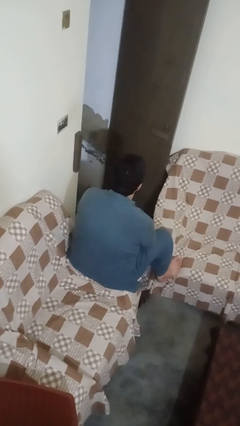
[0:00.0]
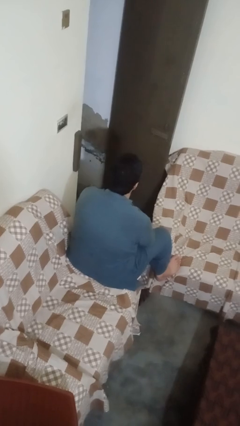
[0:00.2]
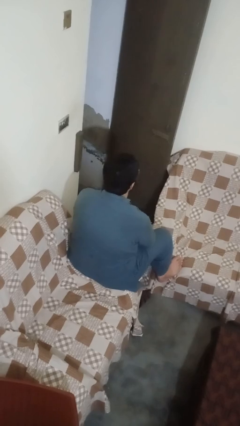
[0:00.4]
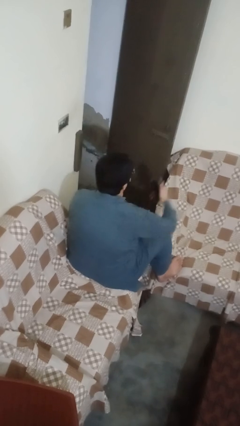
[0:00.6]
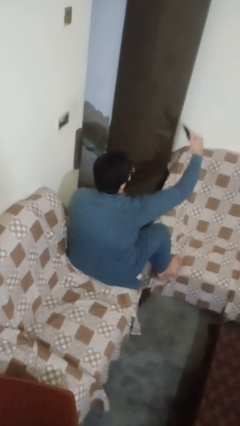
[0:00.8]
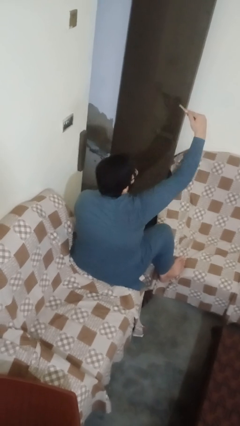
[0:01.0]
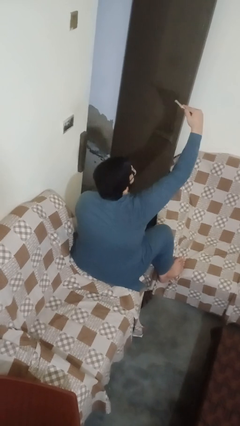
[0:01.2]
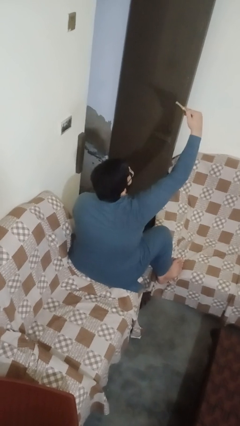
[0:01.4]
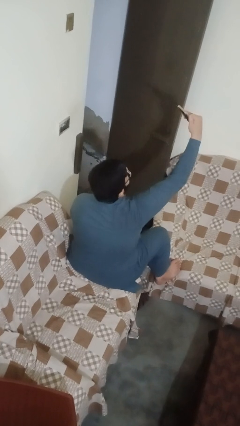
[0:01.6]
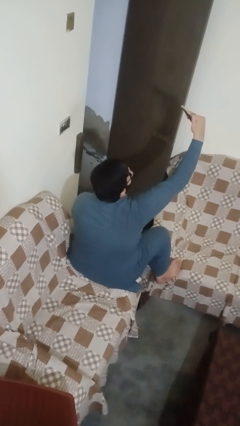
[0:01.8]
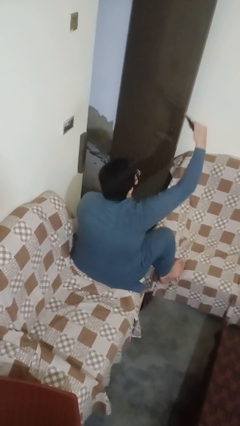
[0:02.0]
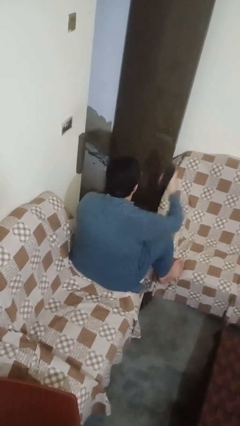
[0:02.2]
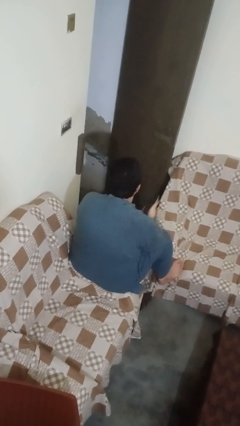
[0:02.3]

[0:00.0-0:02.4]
person takes selfie

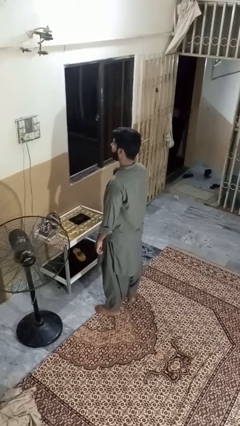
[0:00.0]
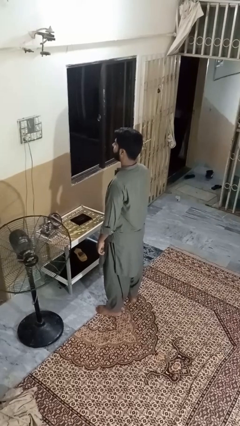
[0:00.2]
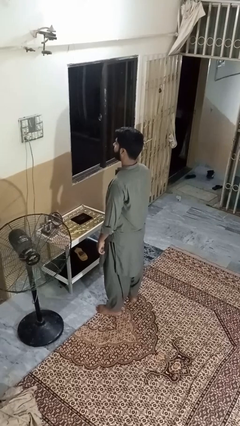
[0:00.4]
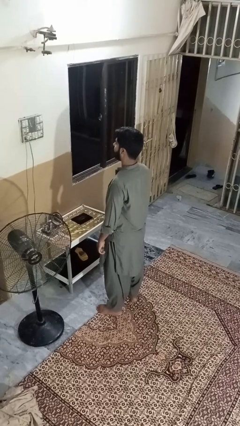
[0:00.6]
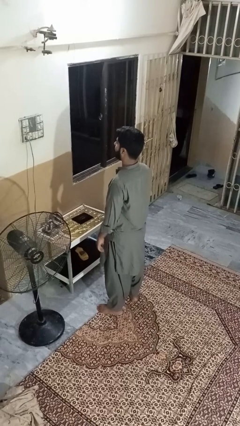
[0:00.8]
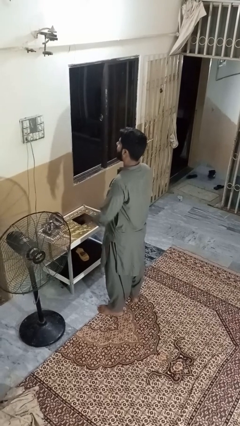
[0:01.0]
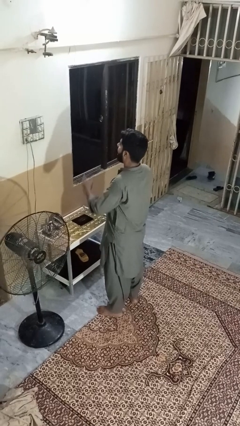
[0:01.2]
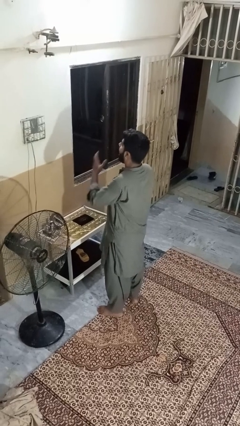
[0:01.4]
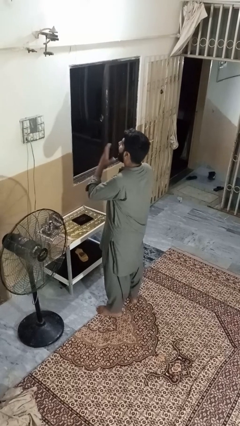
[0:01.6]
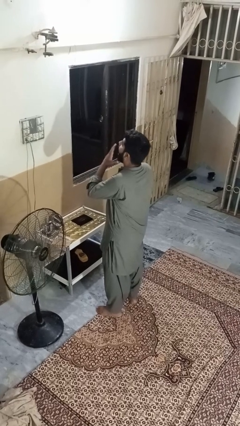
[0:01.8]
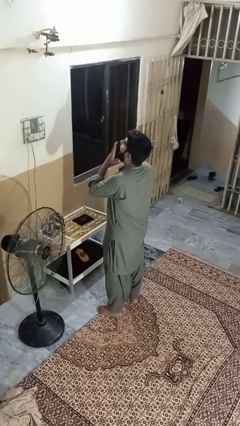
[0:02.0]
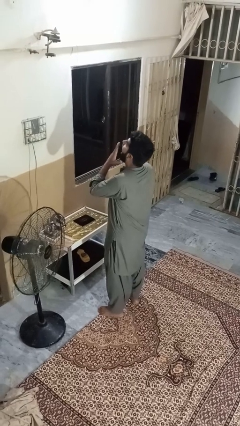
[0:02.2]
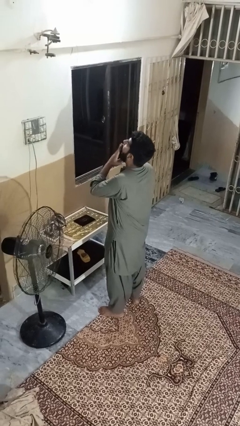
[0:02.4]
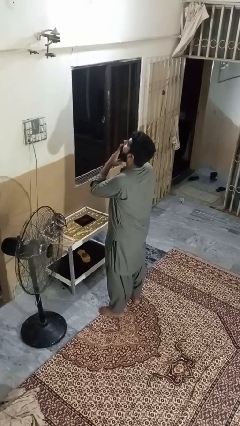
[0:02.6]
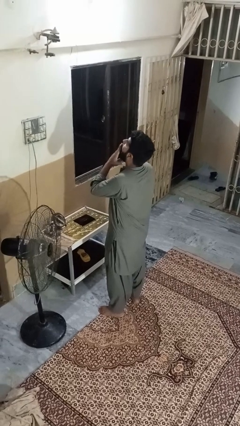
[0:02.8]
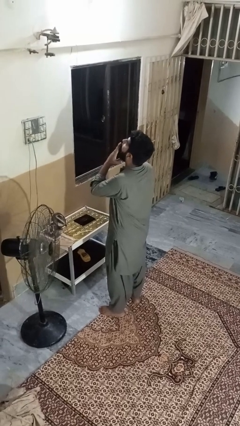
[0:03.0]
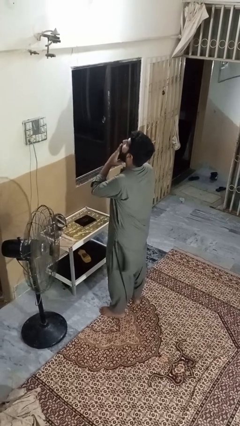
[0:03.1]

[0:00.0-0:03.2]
person yawns

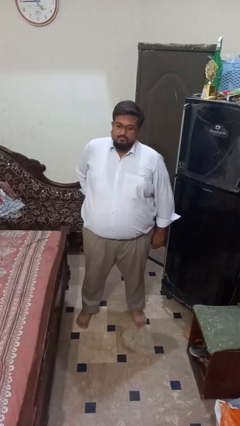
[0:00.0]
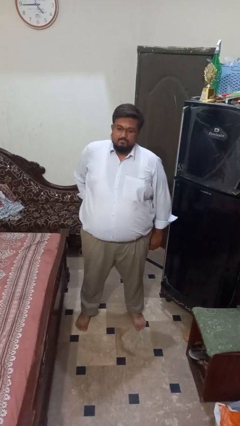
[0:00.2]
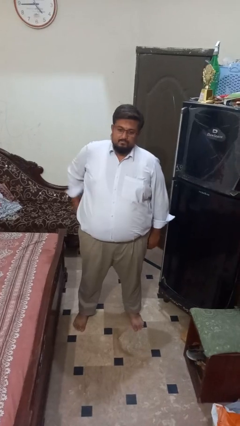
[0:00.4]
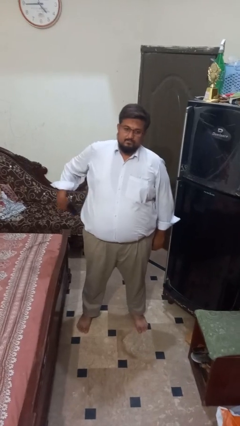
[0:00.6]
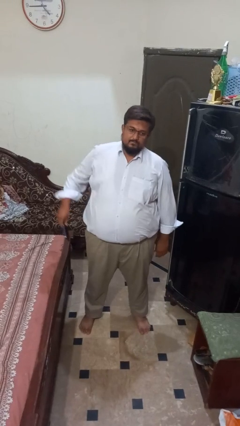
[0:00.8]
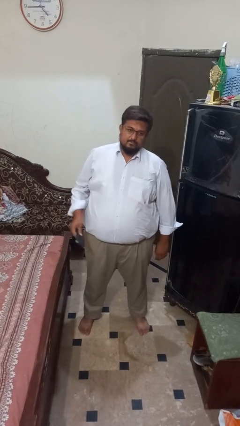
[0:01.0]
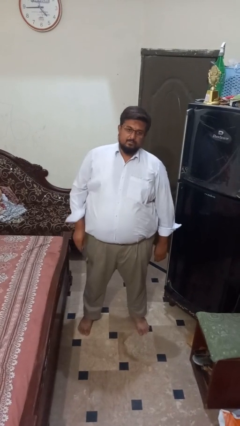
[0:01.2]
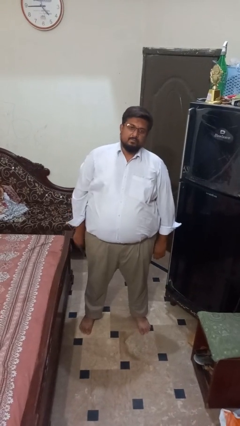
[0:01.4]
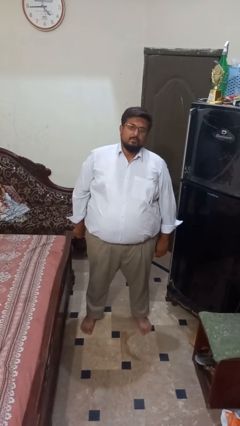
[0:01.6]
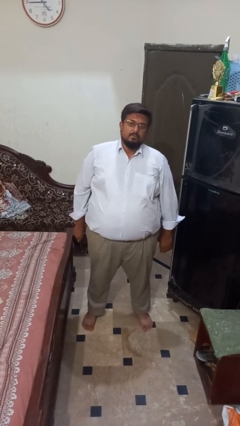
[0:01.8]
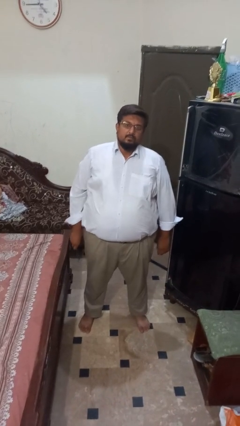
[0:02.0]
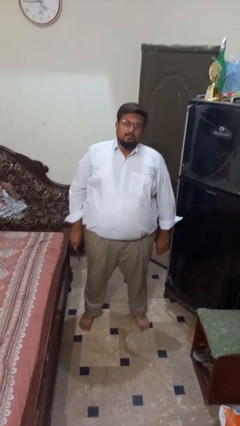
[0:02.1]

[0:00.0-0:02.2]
person takes phone from pocket

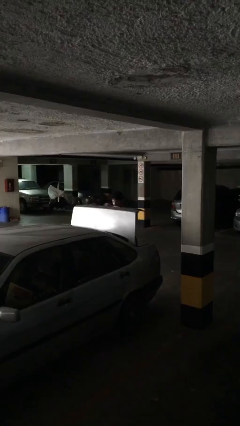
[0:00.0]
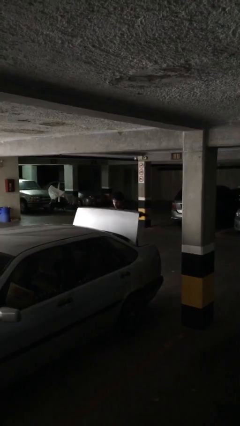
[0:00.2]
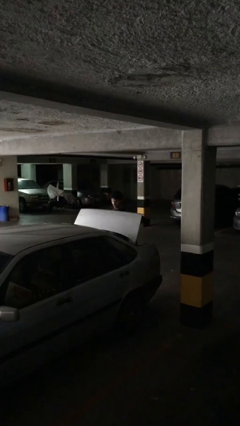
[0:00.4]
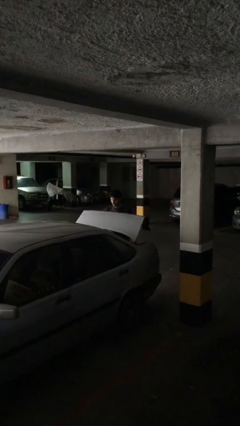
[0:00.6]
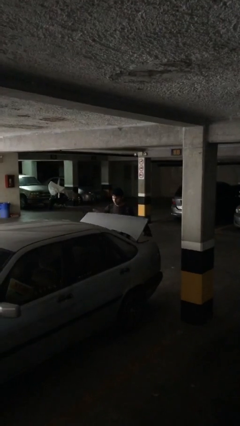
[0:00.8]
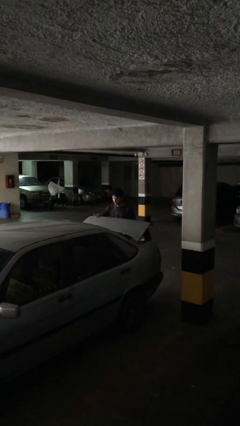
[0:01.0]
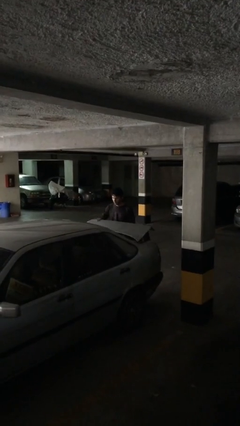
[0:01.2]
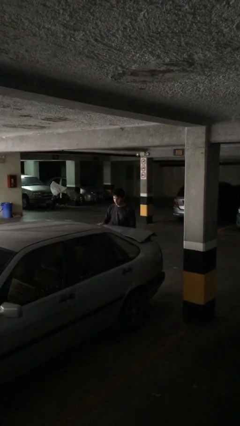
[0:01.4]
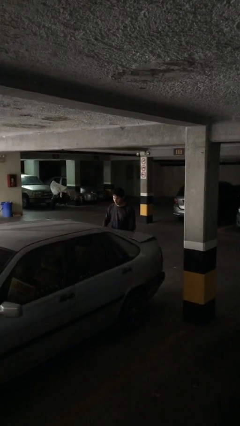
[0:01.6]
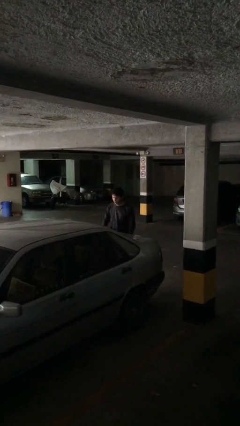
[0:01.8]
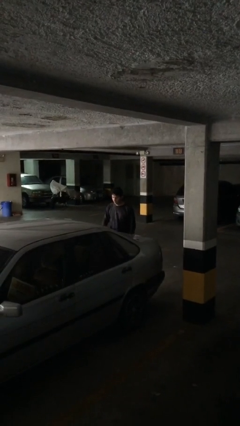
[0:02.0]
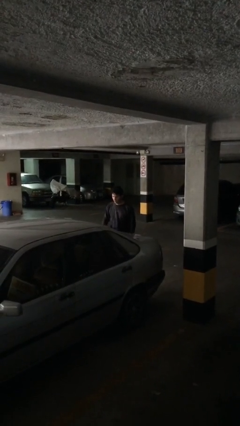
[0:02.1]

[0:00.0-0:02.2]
person closes car trunk

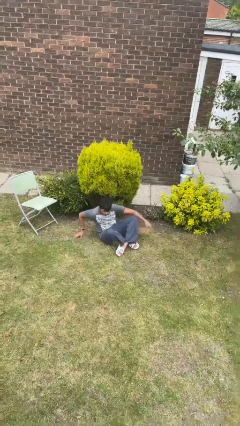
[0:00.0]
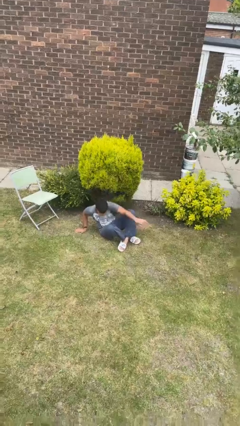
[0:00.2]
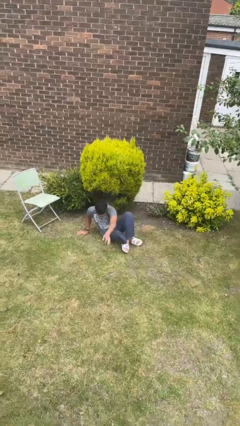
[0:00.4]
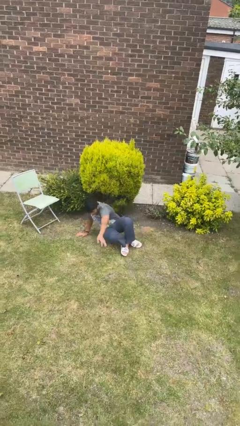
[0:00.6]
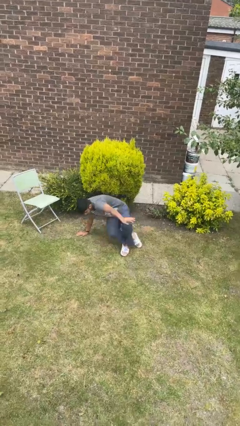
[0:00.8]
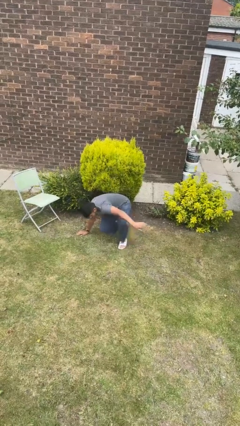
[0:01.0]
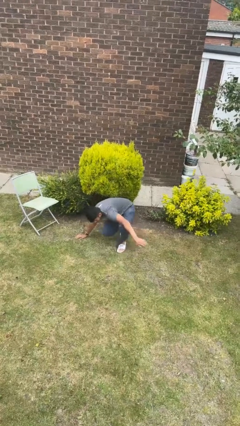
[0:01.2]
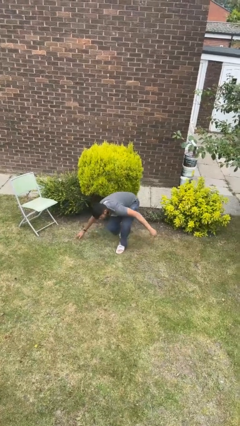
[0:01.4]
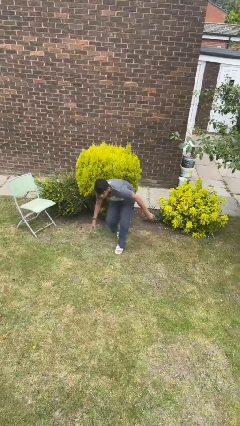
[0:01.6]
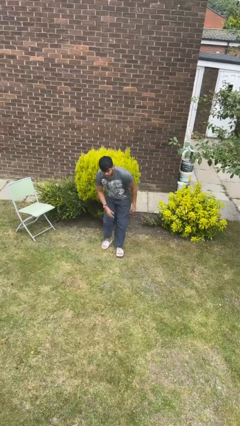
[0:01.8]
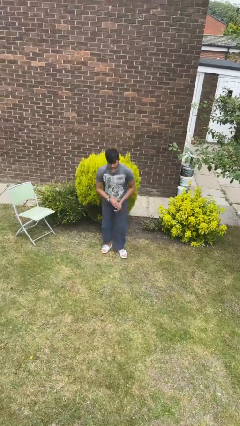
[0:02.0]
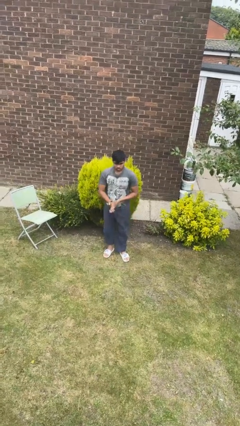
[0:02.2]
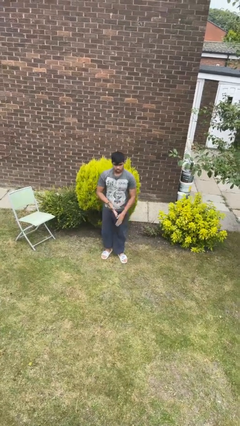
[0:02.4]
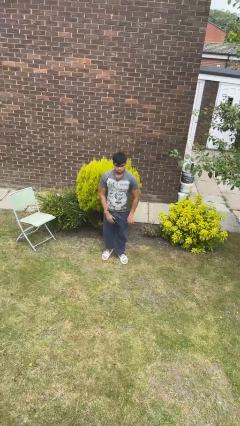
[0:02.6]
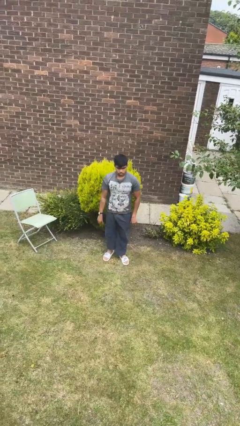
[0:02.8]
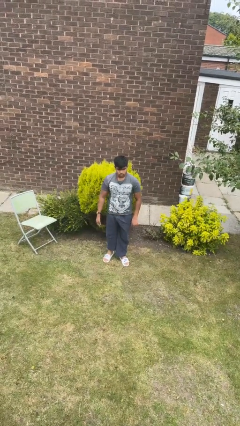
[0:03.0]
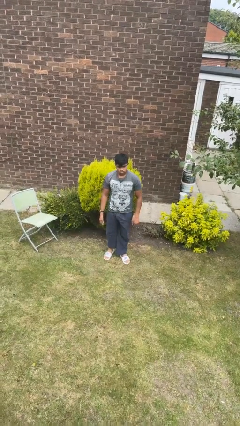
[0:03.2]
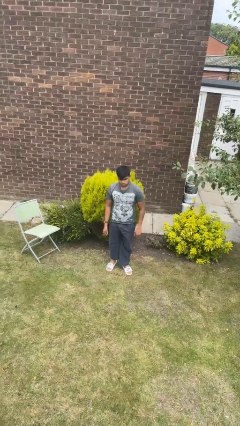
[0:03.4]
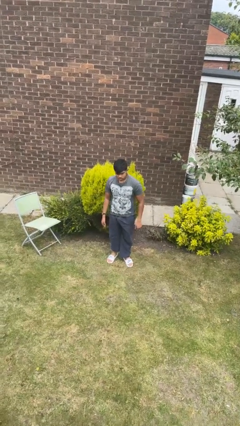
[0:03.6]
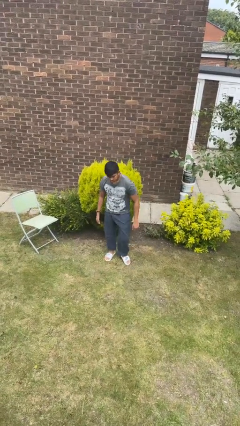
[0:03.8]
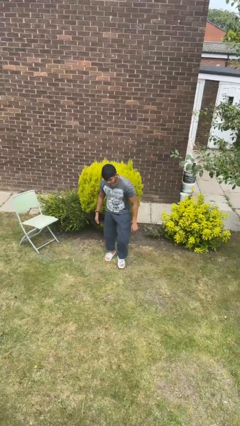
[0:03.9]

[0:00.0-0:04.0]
person stands up from floor

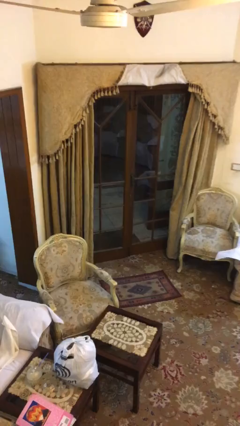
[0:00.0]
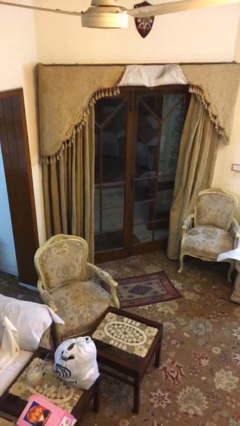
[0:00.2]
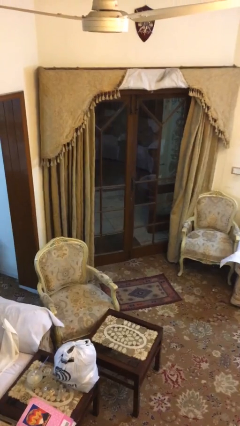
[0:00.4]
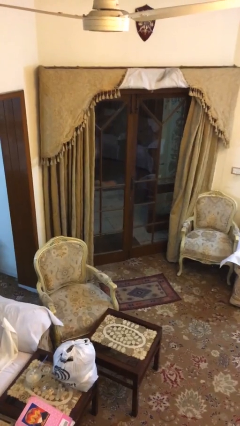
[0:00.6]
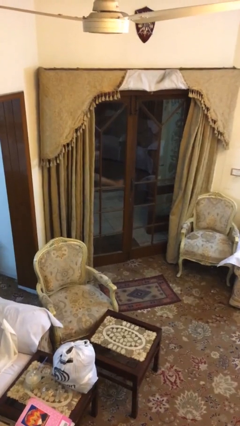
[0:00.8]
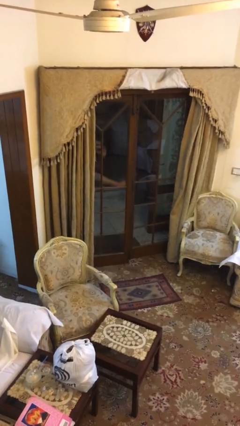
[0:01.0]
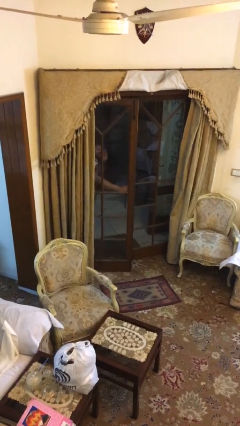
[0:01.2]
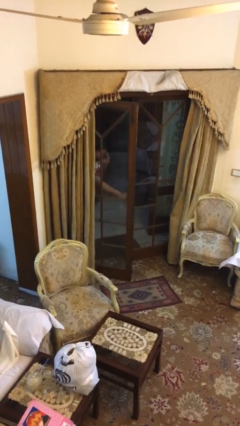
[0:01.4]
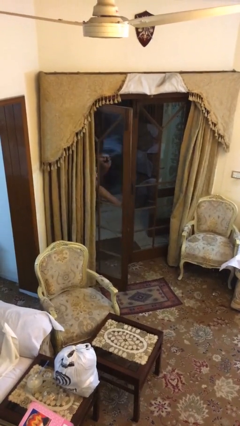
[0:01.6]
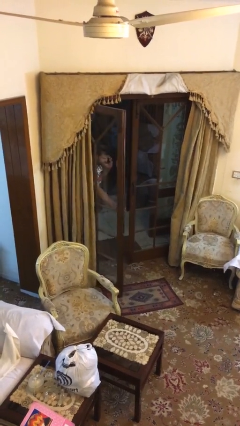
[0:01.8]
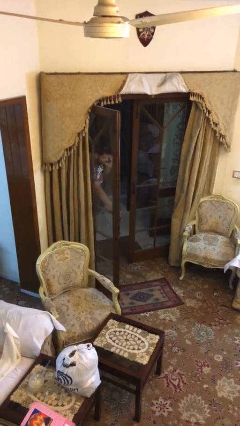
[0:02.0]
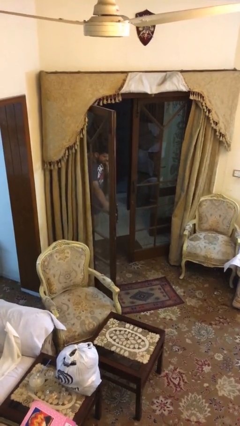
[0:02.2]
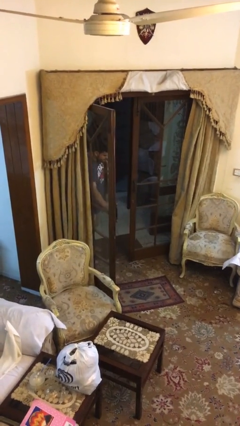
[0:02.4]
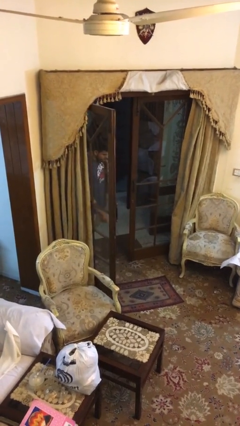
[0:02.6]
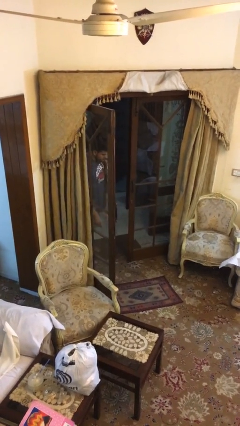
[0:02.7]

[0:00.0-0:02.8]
person opens facility door

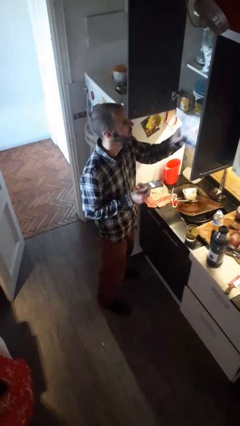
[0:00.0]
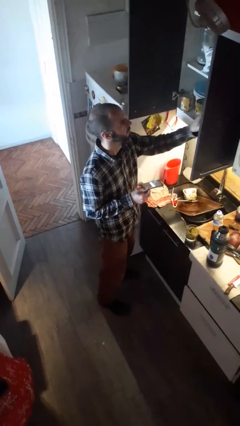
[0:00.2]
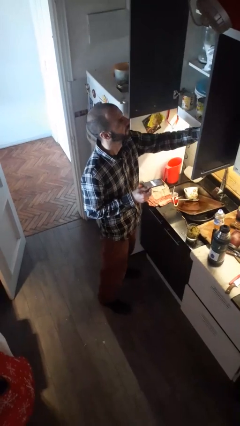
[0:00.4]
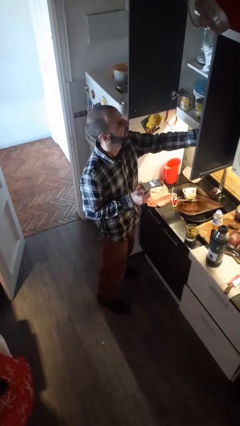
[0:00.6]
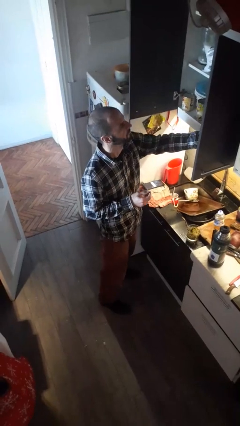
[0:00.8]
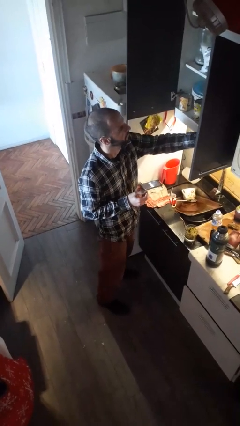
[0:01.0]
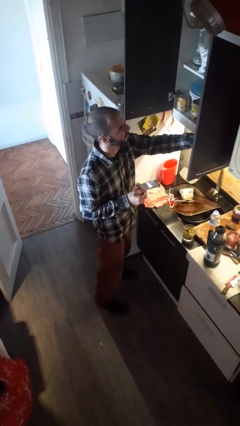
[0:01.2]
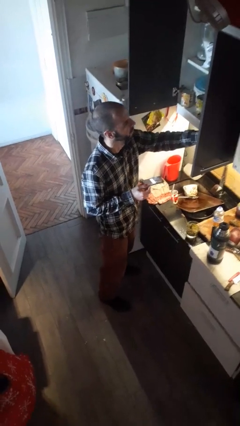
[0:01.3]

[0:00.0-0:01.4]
person puts object into kitchen drawer
